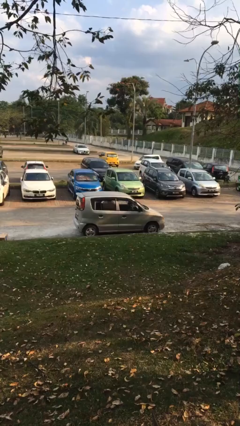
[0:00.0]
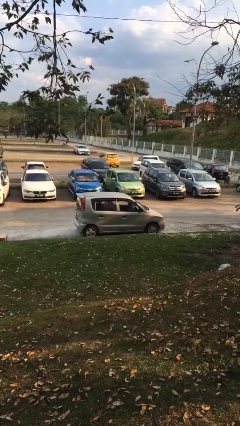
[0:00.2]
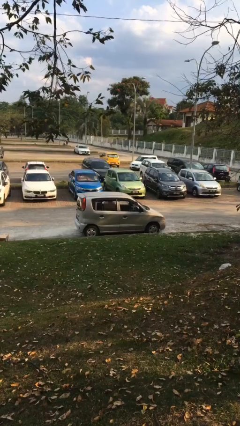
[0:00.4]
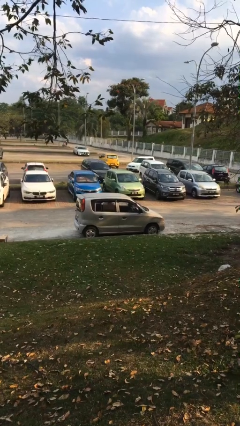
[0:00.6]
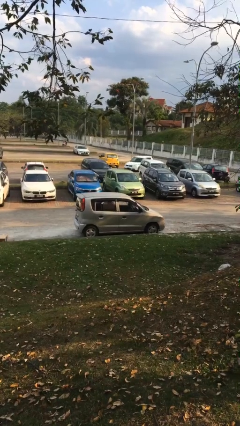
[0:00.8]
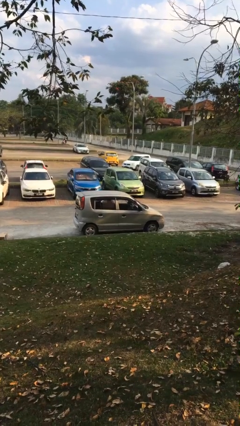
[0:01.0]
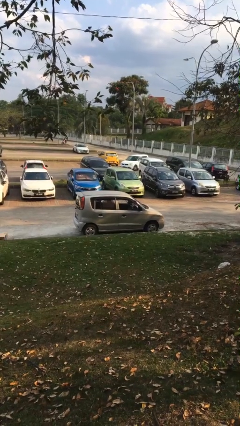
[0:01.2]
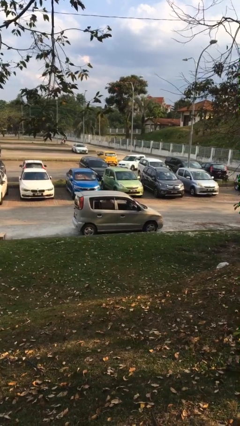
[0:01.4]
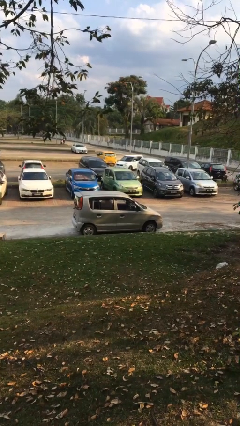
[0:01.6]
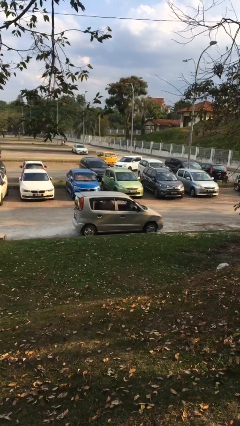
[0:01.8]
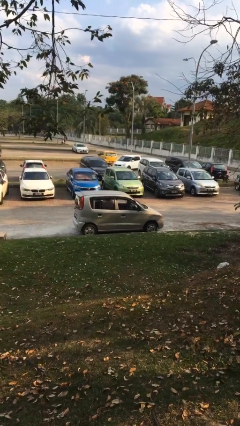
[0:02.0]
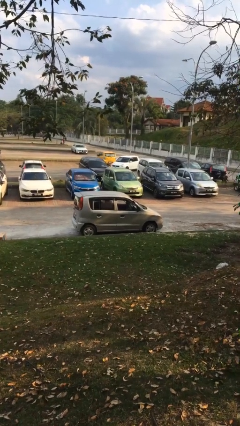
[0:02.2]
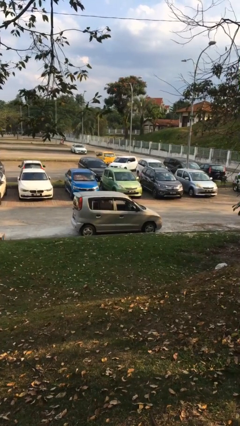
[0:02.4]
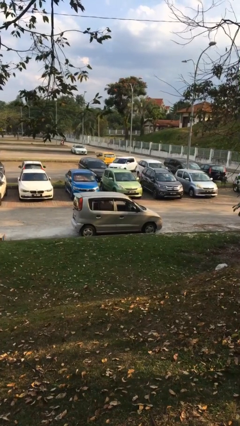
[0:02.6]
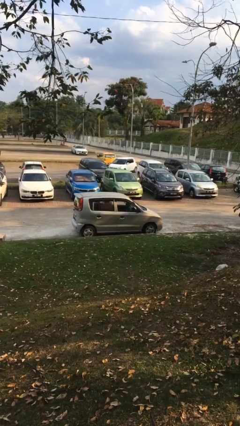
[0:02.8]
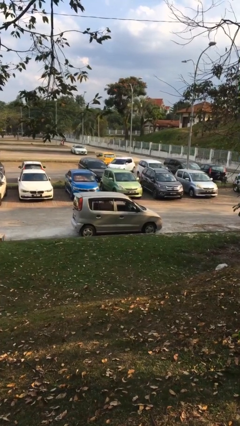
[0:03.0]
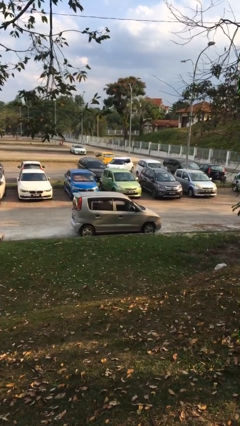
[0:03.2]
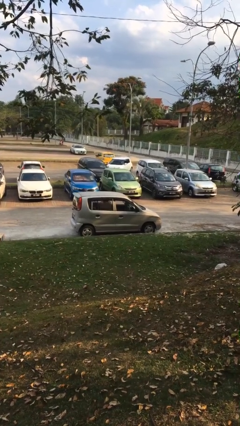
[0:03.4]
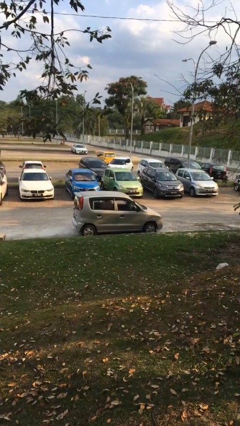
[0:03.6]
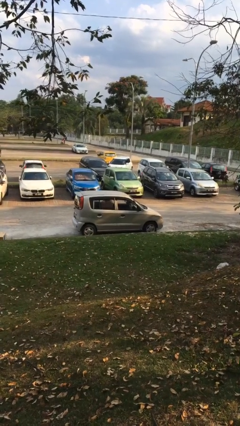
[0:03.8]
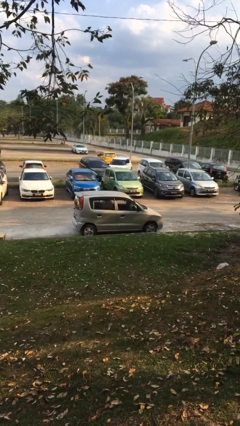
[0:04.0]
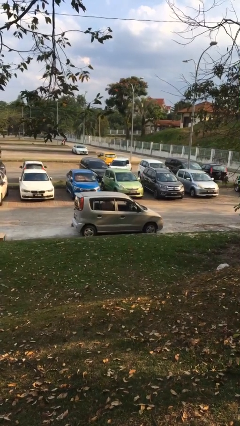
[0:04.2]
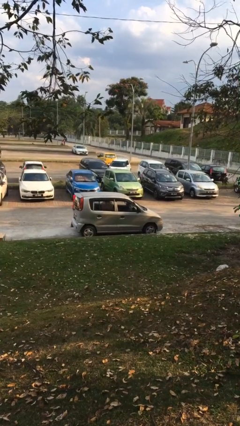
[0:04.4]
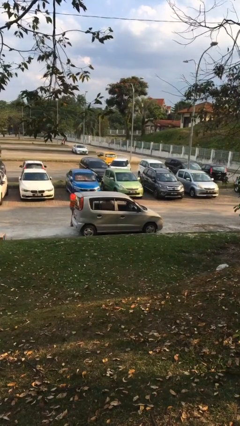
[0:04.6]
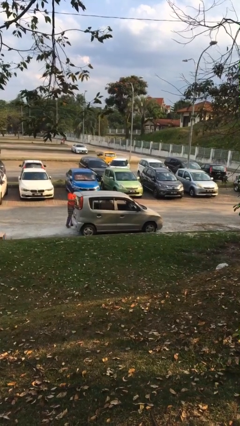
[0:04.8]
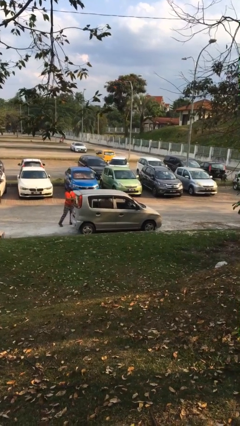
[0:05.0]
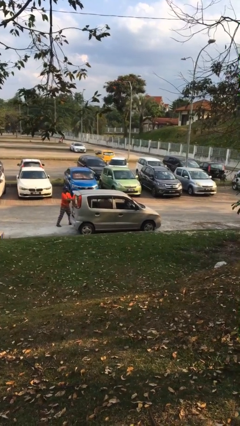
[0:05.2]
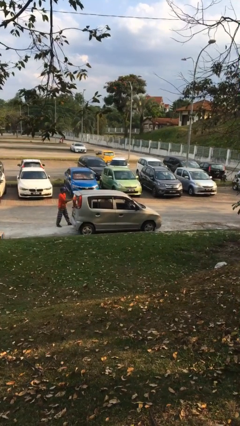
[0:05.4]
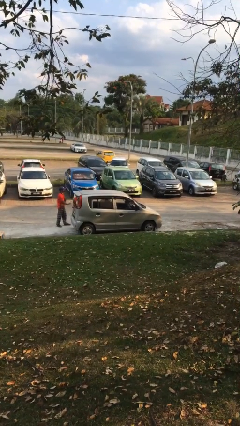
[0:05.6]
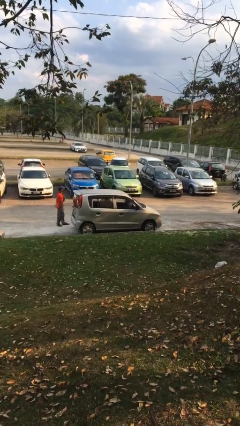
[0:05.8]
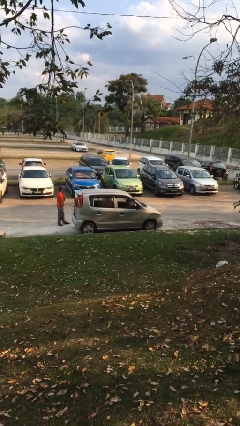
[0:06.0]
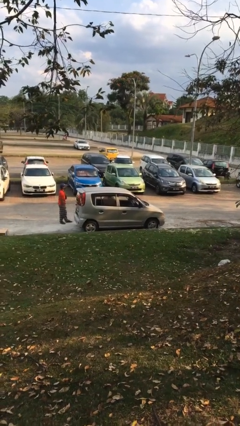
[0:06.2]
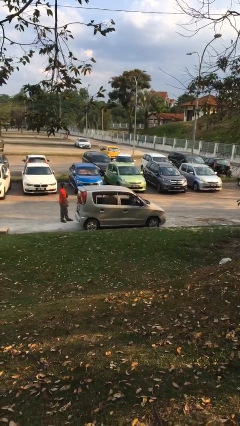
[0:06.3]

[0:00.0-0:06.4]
car drops off person

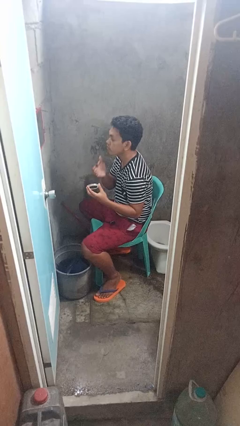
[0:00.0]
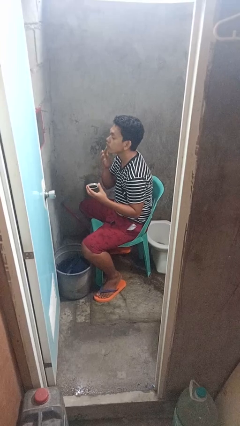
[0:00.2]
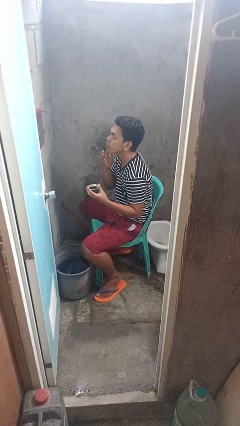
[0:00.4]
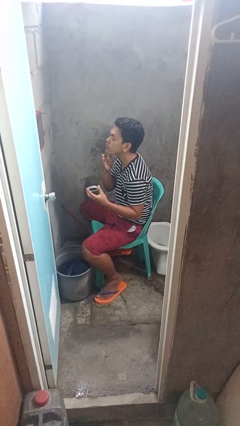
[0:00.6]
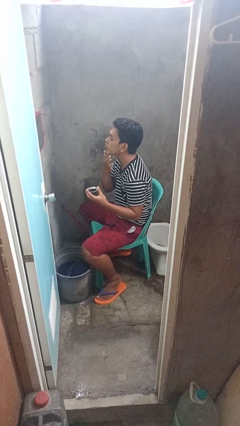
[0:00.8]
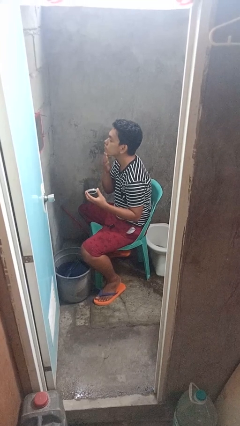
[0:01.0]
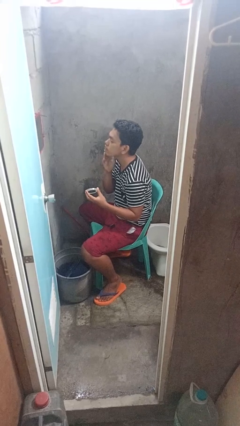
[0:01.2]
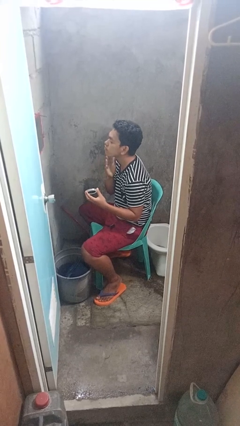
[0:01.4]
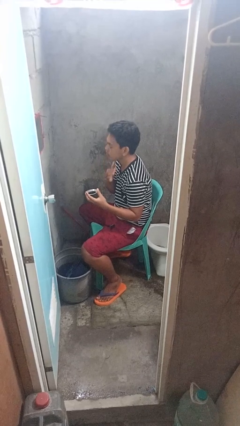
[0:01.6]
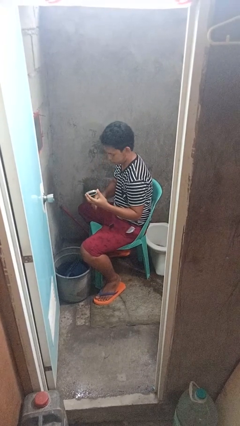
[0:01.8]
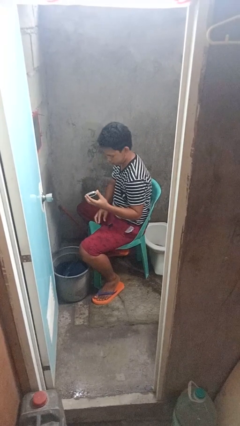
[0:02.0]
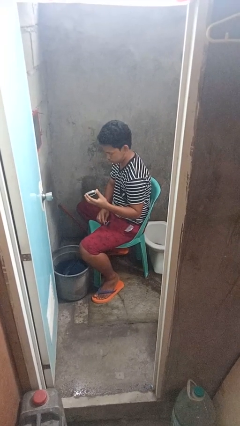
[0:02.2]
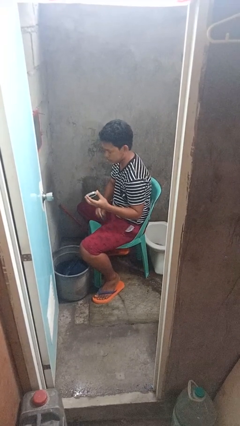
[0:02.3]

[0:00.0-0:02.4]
person applies shaving cream

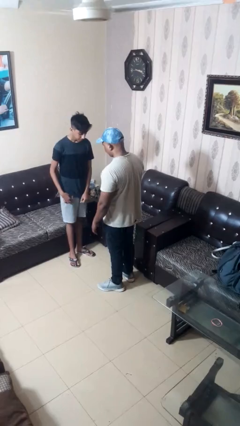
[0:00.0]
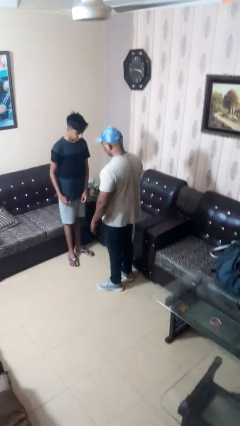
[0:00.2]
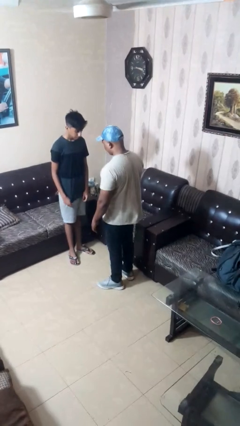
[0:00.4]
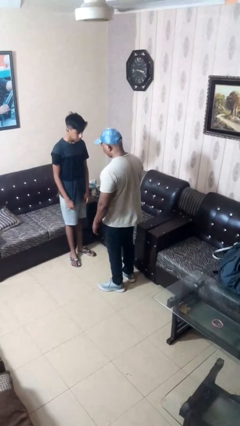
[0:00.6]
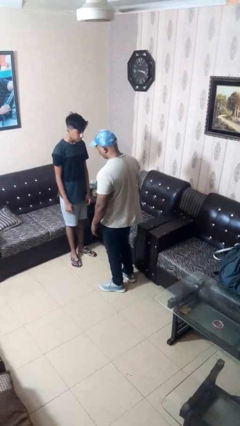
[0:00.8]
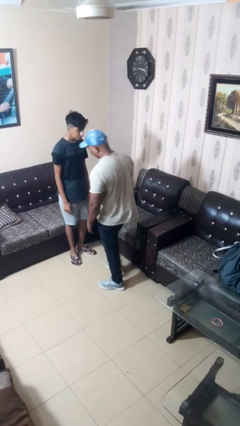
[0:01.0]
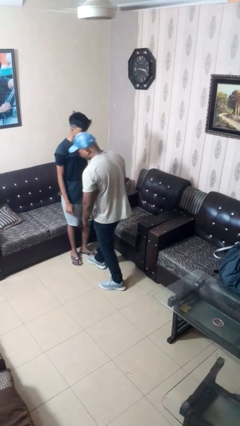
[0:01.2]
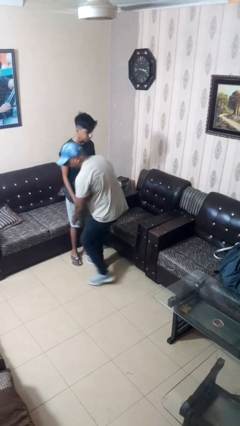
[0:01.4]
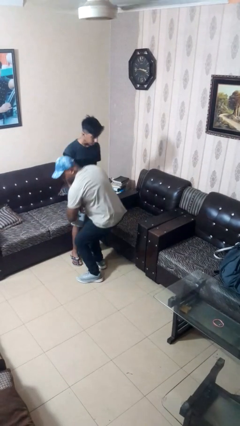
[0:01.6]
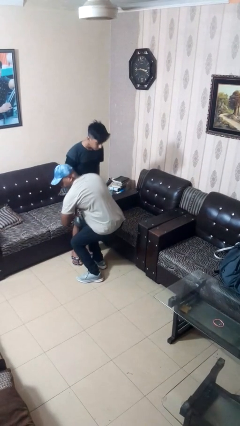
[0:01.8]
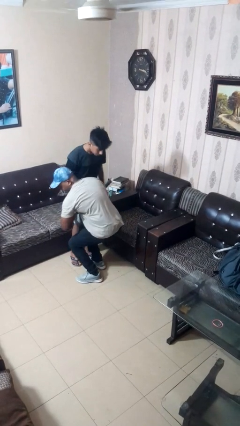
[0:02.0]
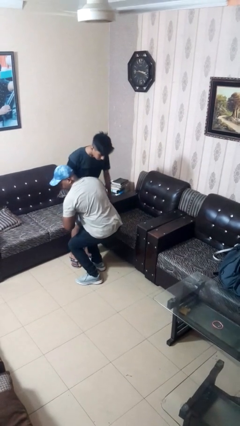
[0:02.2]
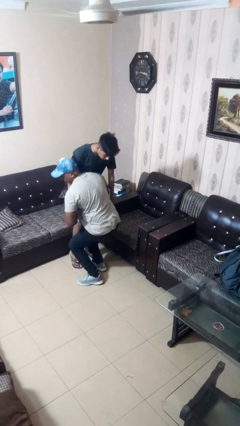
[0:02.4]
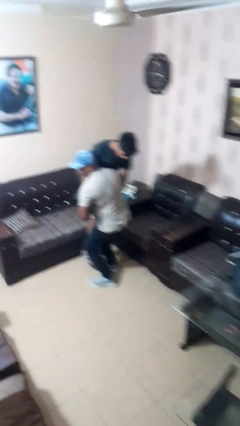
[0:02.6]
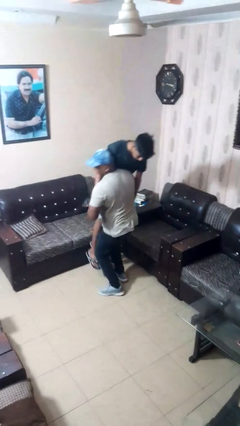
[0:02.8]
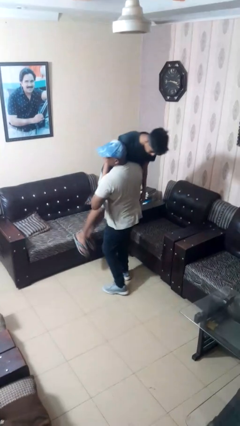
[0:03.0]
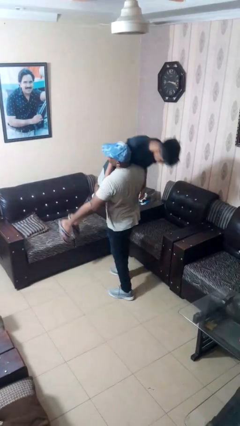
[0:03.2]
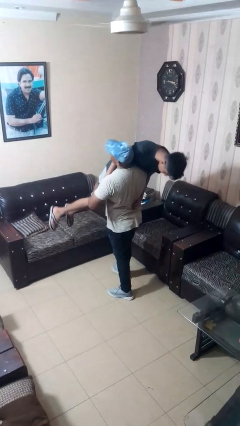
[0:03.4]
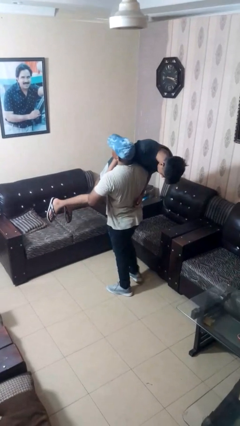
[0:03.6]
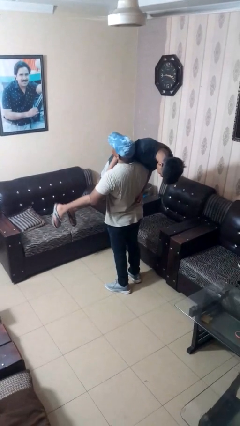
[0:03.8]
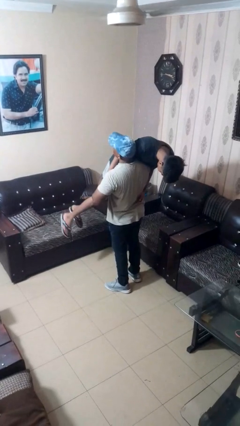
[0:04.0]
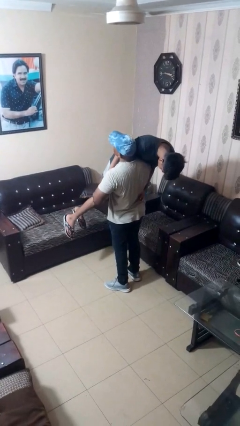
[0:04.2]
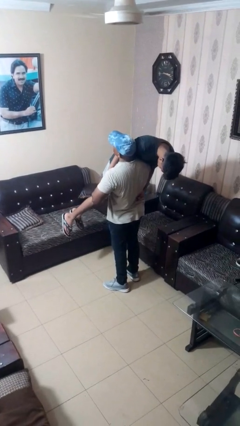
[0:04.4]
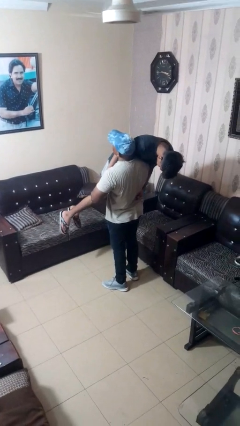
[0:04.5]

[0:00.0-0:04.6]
person picks up person

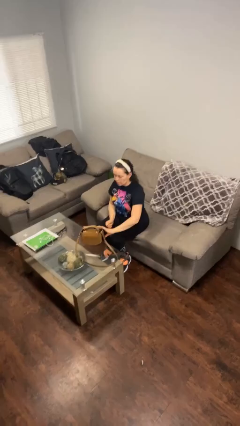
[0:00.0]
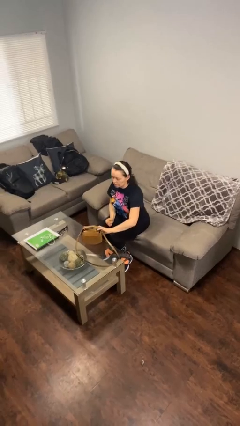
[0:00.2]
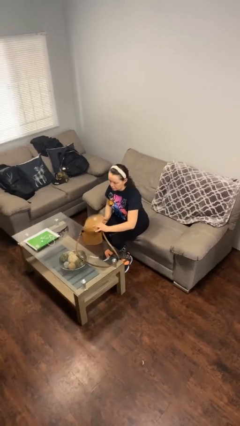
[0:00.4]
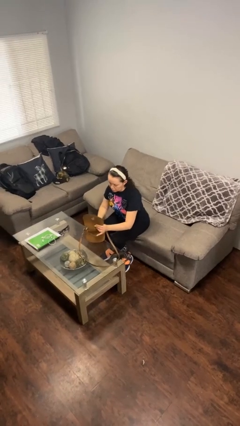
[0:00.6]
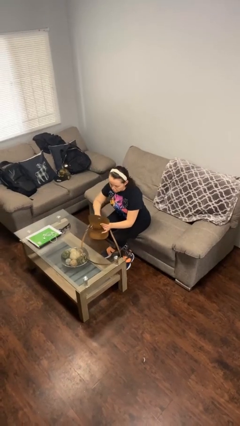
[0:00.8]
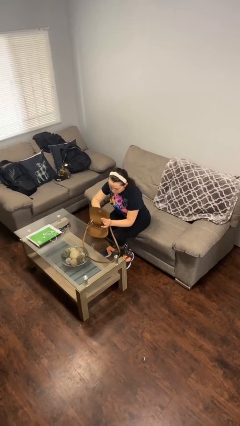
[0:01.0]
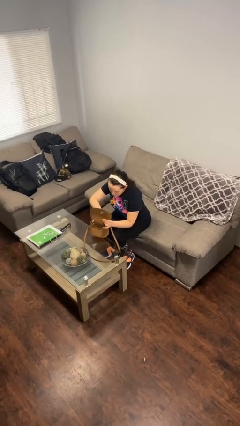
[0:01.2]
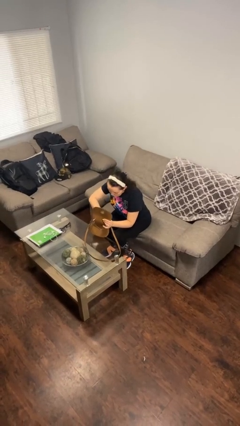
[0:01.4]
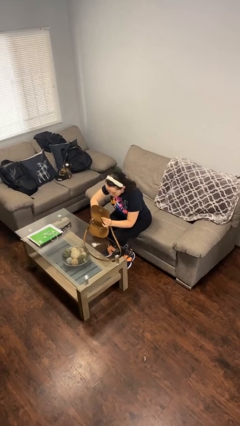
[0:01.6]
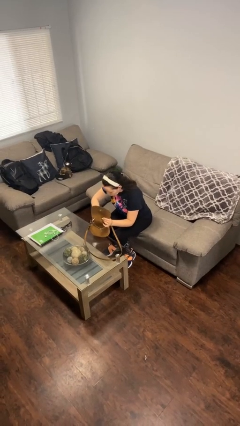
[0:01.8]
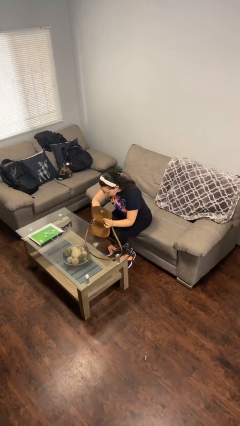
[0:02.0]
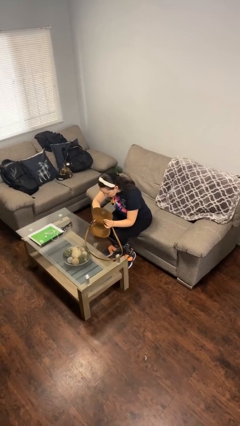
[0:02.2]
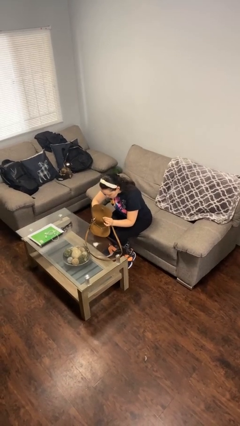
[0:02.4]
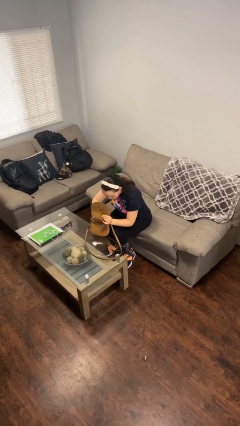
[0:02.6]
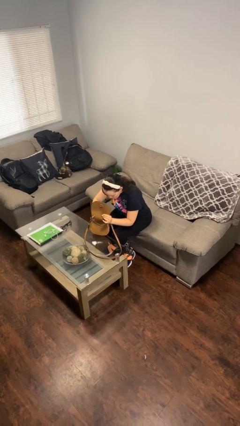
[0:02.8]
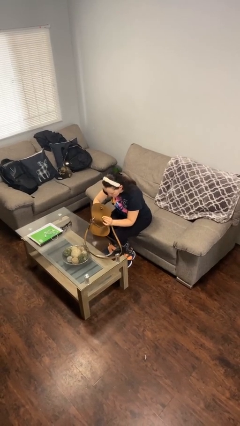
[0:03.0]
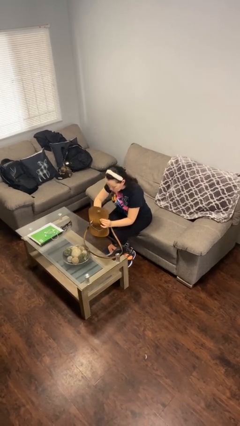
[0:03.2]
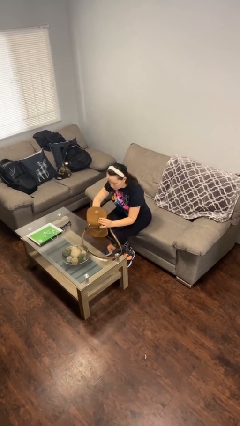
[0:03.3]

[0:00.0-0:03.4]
person searches in purse

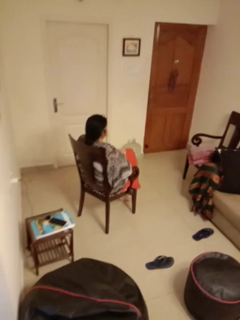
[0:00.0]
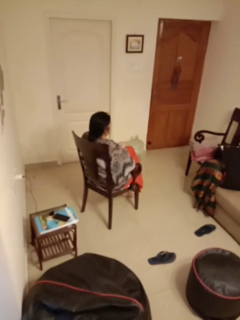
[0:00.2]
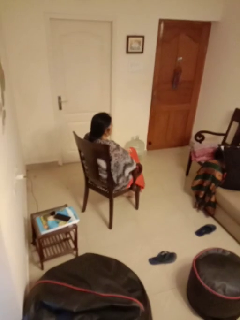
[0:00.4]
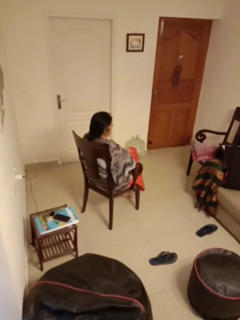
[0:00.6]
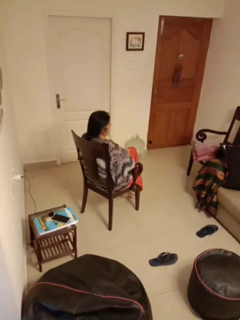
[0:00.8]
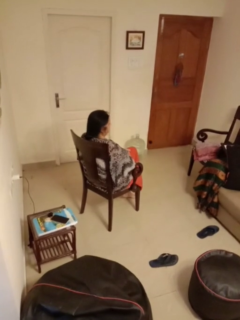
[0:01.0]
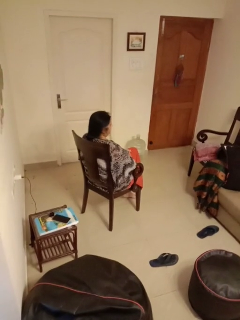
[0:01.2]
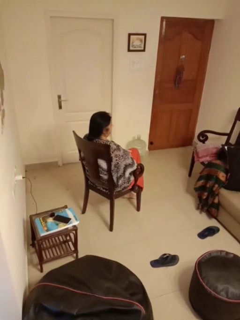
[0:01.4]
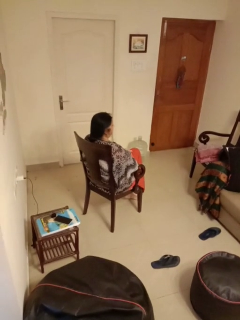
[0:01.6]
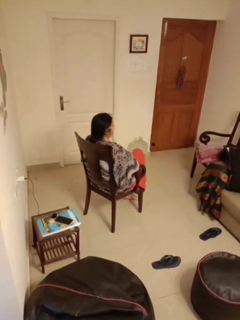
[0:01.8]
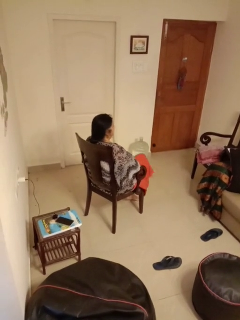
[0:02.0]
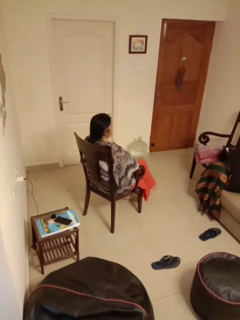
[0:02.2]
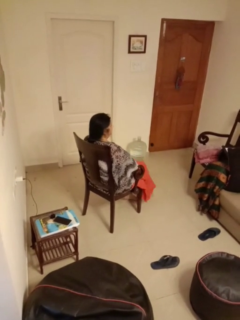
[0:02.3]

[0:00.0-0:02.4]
person crosses legs
